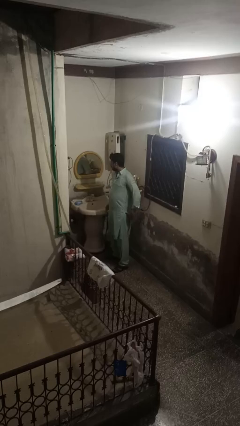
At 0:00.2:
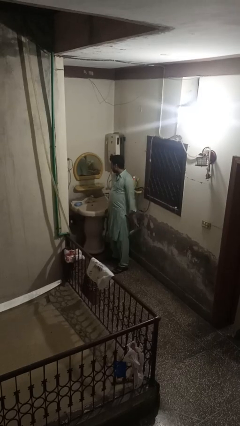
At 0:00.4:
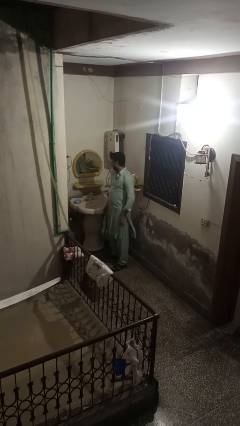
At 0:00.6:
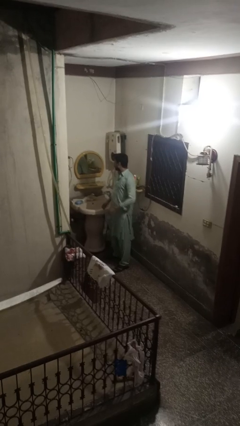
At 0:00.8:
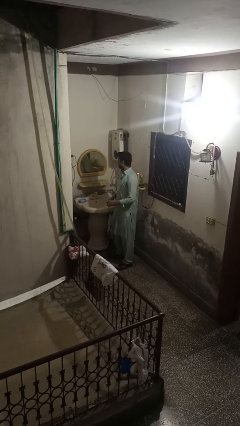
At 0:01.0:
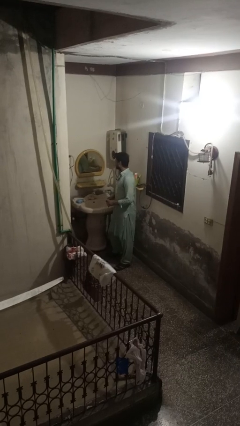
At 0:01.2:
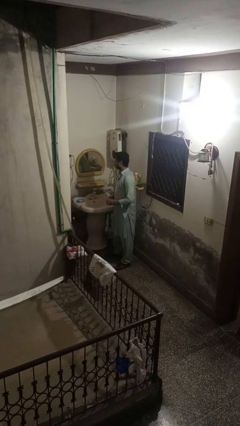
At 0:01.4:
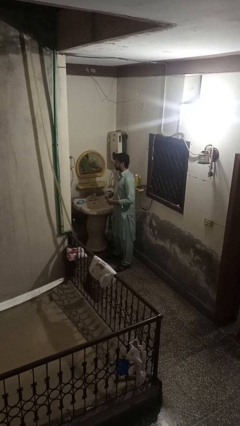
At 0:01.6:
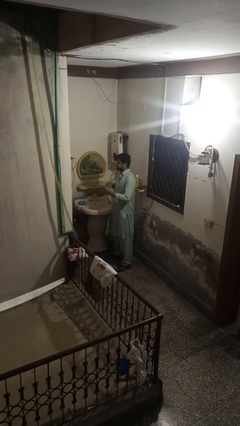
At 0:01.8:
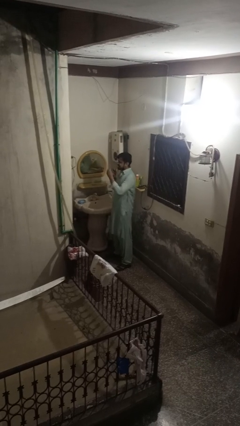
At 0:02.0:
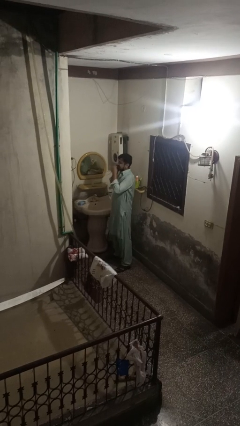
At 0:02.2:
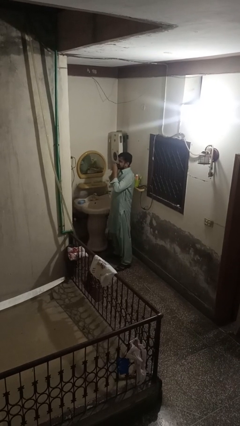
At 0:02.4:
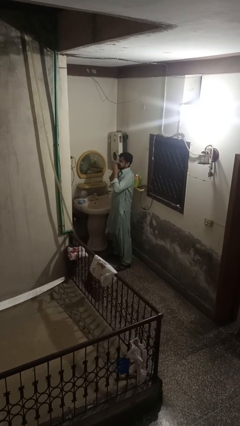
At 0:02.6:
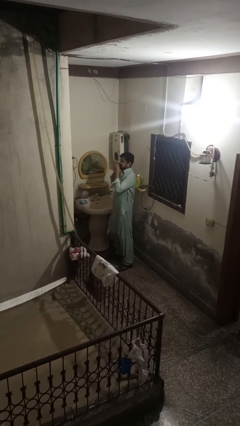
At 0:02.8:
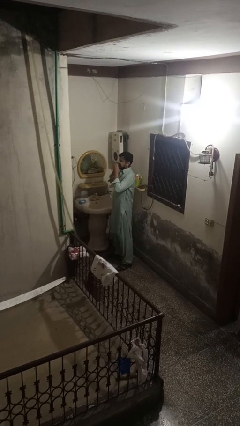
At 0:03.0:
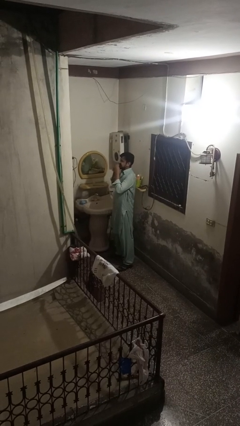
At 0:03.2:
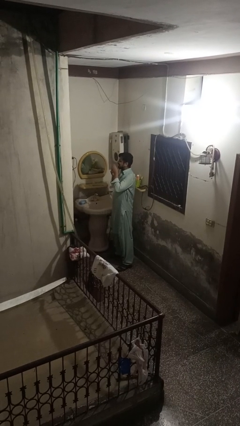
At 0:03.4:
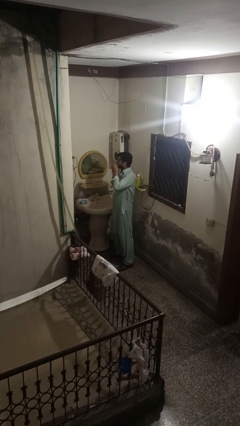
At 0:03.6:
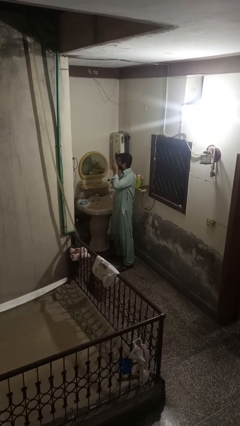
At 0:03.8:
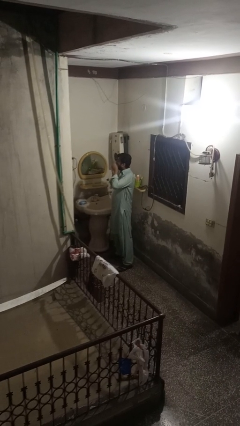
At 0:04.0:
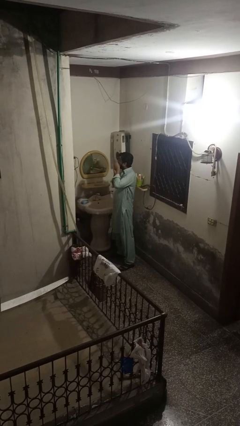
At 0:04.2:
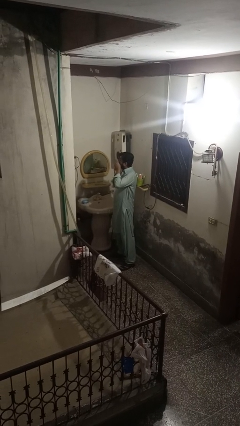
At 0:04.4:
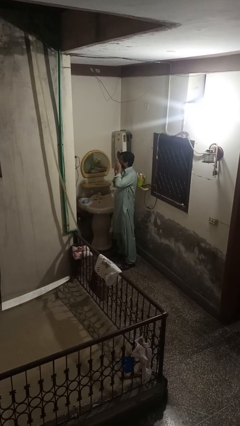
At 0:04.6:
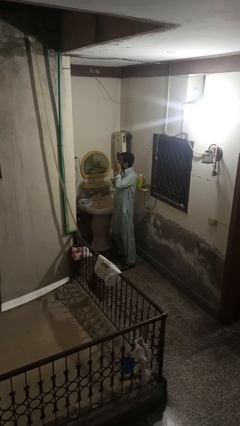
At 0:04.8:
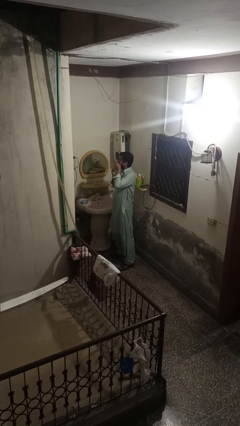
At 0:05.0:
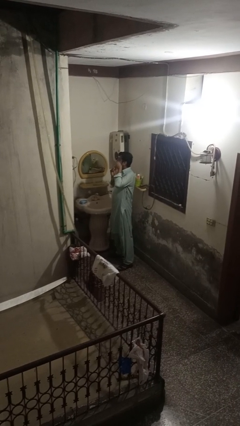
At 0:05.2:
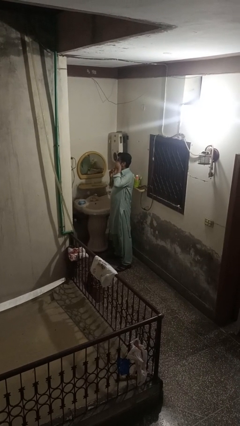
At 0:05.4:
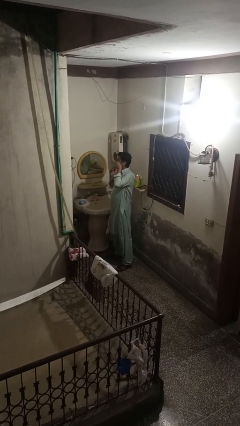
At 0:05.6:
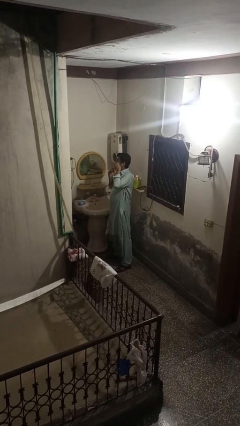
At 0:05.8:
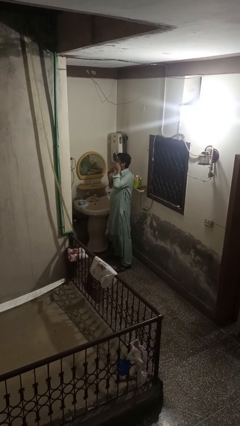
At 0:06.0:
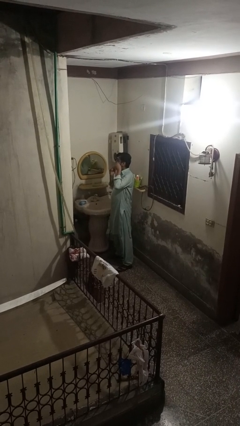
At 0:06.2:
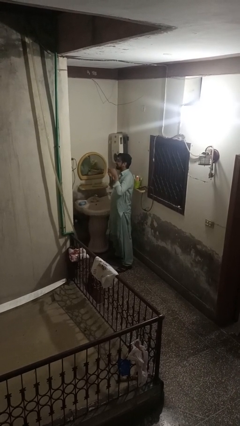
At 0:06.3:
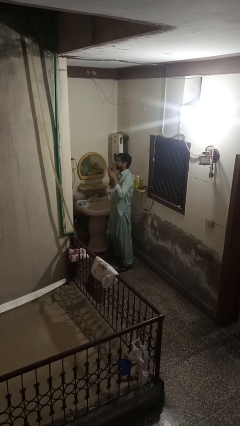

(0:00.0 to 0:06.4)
person flosses

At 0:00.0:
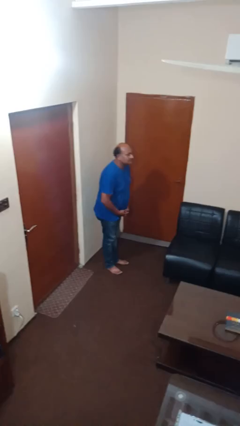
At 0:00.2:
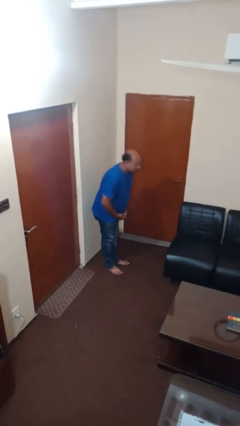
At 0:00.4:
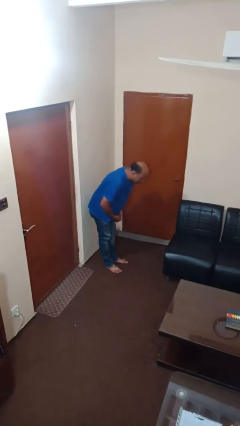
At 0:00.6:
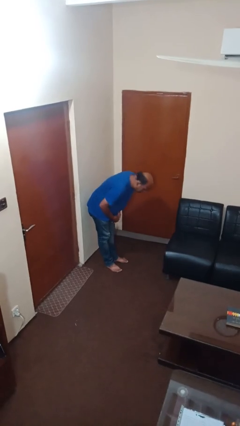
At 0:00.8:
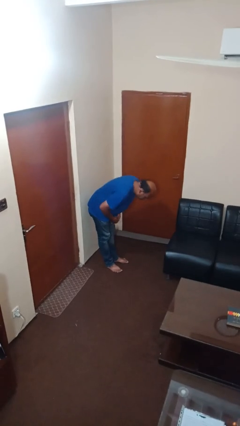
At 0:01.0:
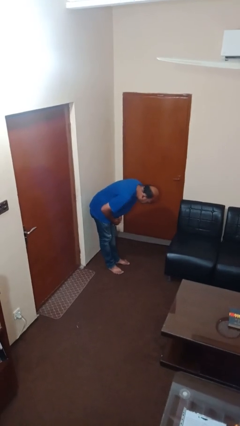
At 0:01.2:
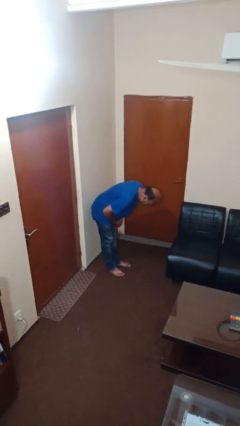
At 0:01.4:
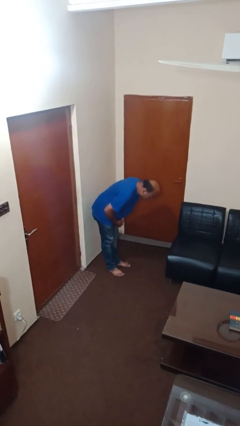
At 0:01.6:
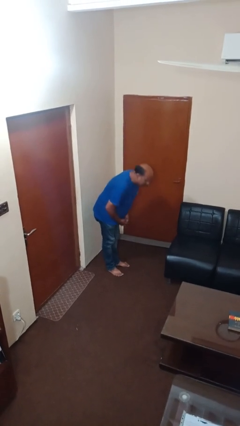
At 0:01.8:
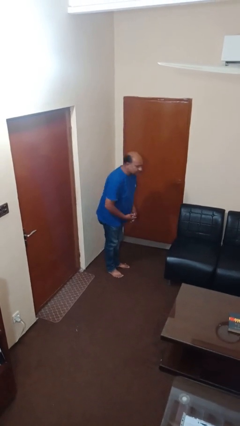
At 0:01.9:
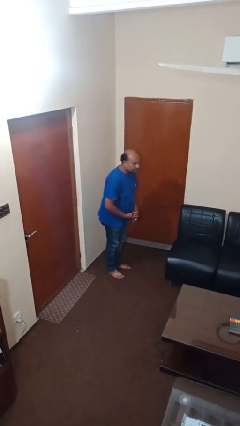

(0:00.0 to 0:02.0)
person bows

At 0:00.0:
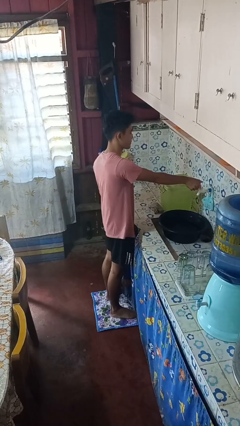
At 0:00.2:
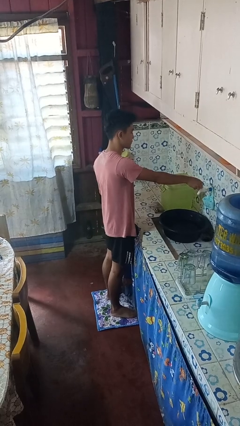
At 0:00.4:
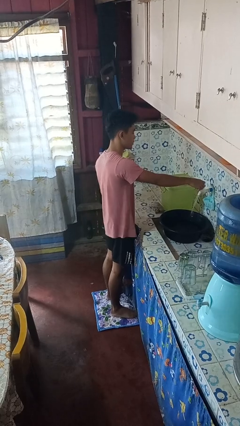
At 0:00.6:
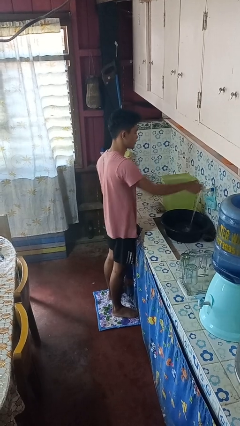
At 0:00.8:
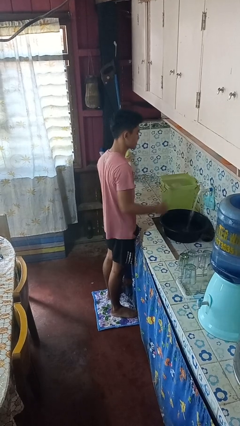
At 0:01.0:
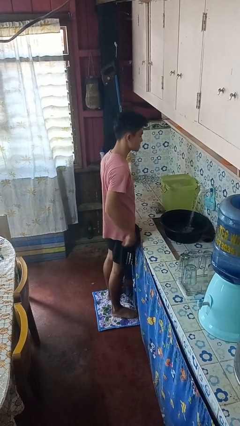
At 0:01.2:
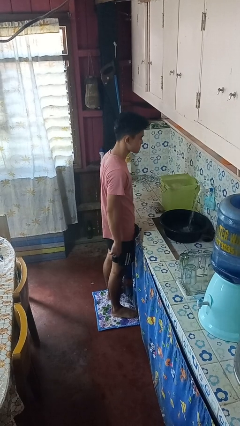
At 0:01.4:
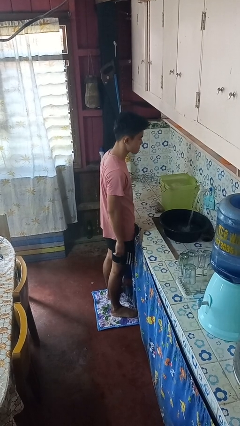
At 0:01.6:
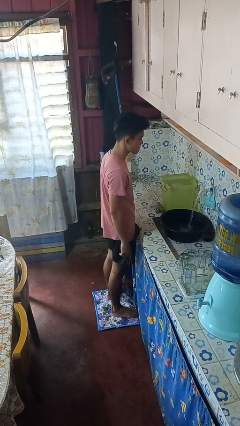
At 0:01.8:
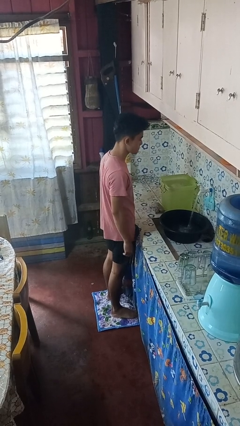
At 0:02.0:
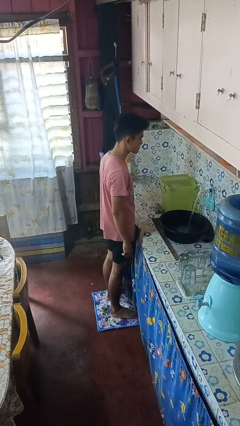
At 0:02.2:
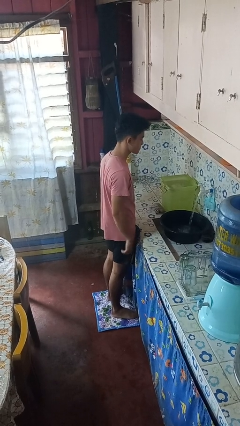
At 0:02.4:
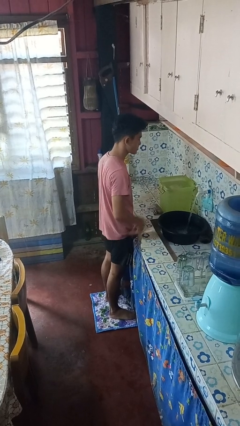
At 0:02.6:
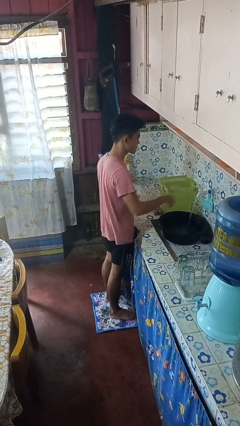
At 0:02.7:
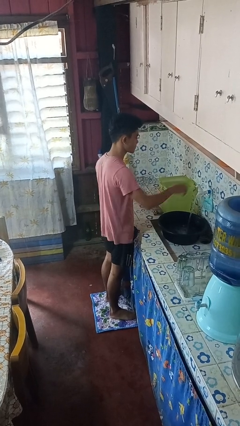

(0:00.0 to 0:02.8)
person turns on faucet

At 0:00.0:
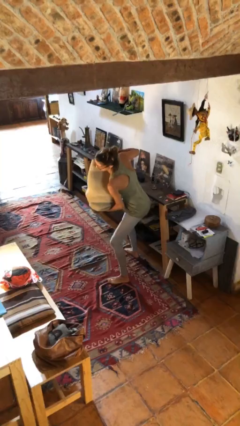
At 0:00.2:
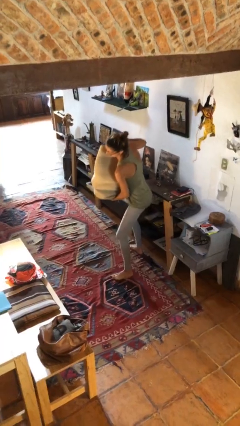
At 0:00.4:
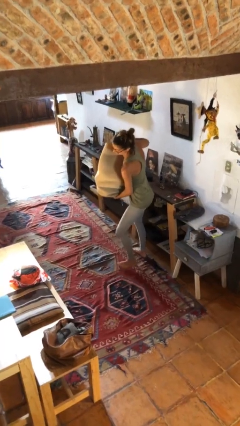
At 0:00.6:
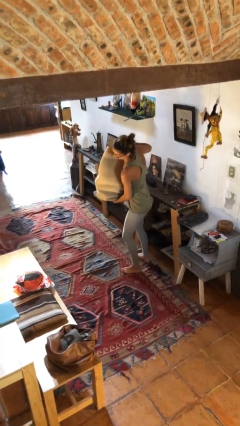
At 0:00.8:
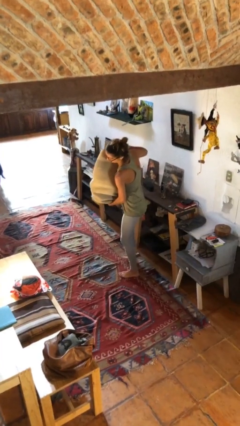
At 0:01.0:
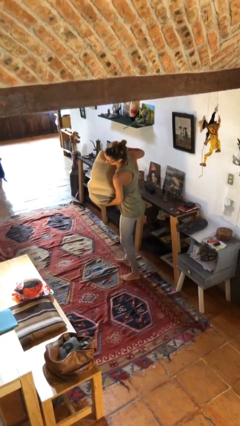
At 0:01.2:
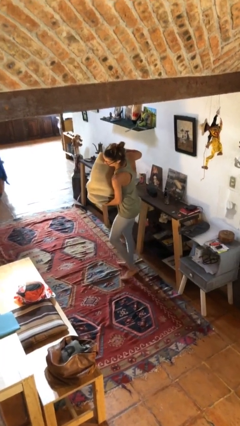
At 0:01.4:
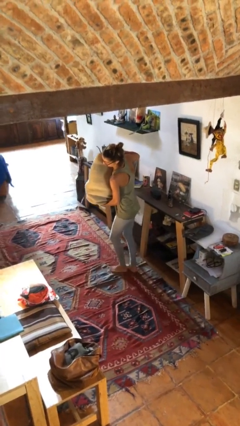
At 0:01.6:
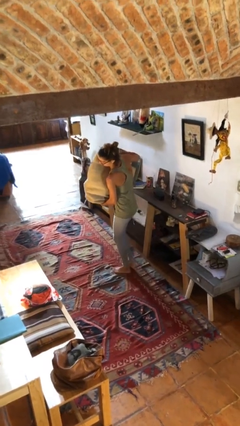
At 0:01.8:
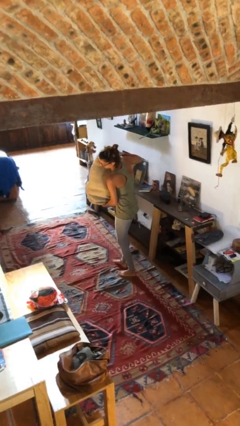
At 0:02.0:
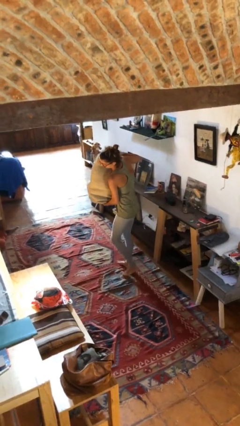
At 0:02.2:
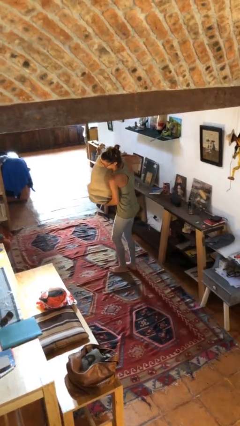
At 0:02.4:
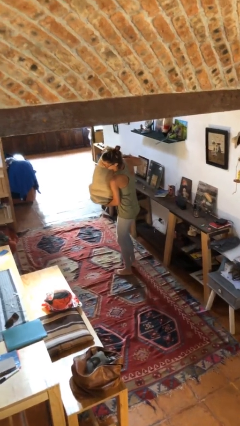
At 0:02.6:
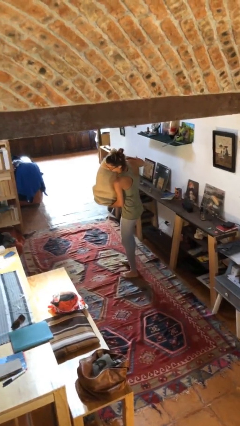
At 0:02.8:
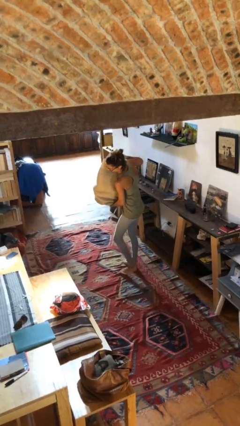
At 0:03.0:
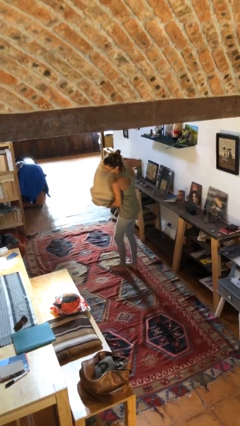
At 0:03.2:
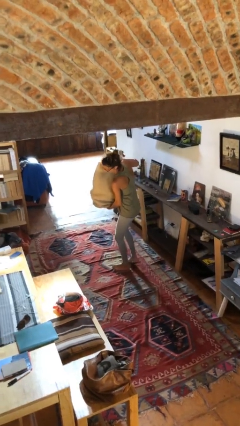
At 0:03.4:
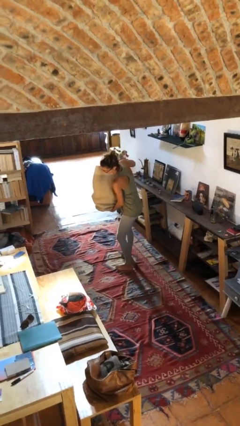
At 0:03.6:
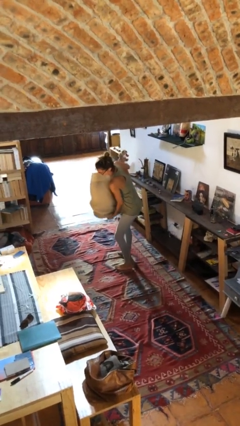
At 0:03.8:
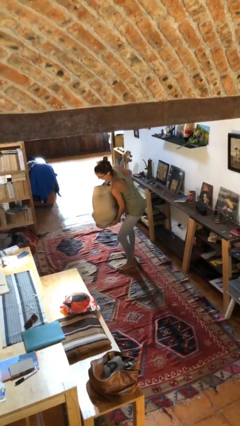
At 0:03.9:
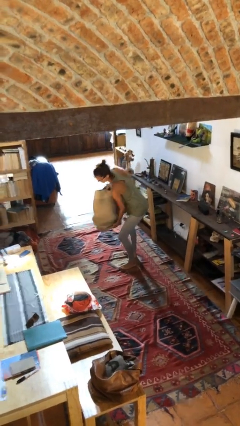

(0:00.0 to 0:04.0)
person carries heavy object

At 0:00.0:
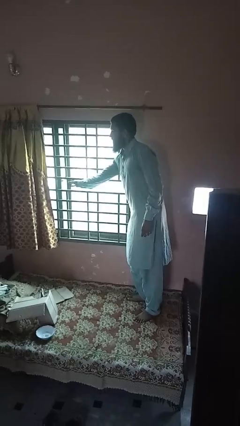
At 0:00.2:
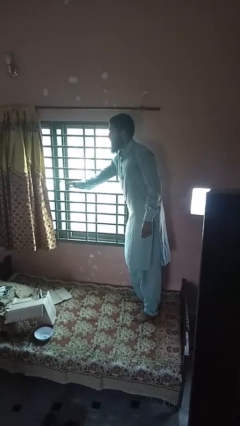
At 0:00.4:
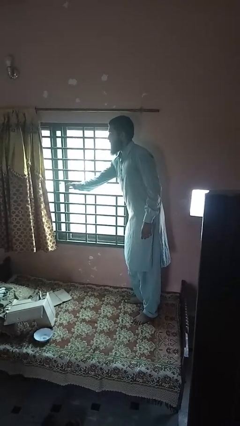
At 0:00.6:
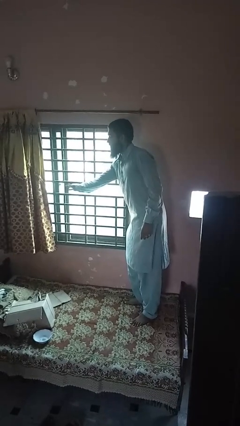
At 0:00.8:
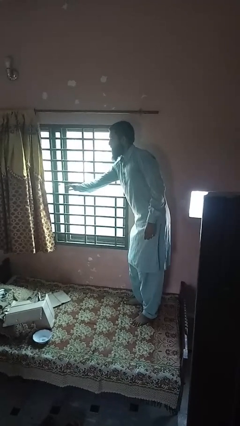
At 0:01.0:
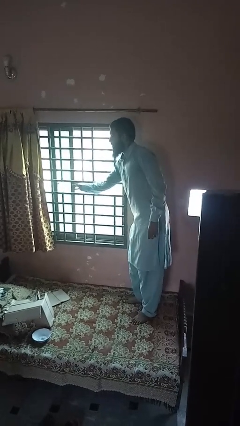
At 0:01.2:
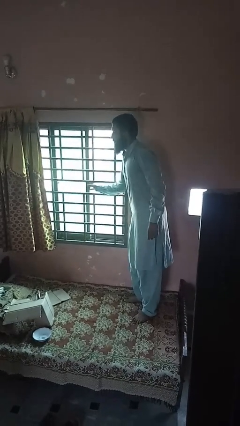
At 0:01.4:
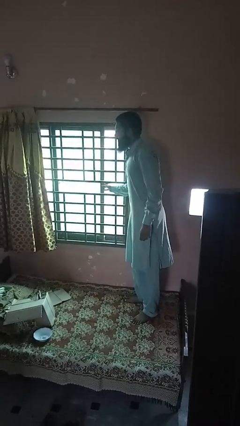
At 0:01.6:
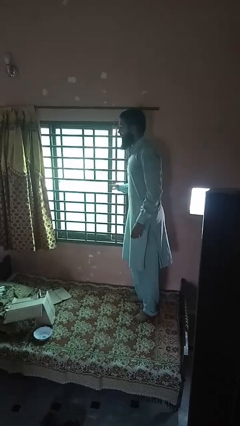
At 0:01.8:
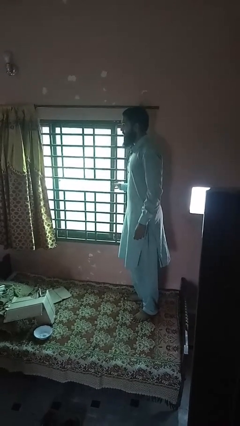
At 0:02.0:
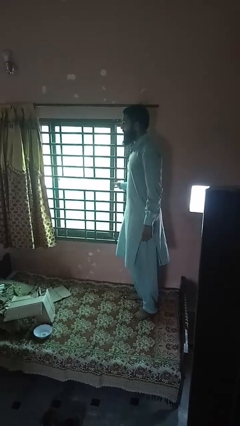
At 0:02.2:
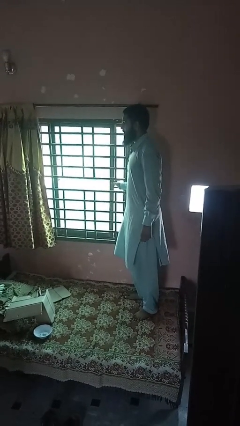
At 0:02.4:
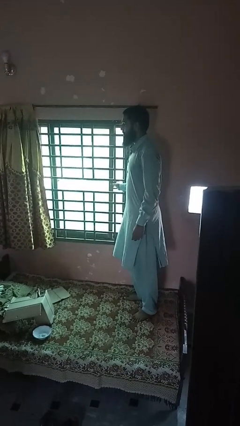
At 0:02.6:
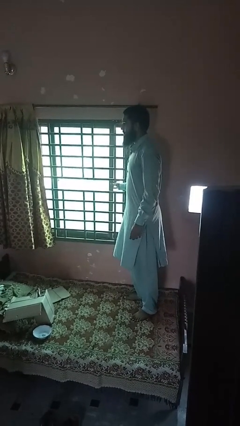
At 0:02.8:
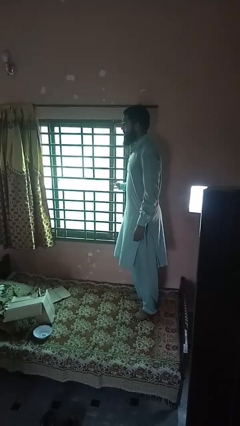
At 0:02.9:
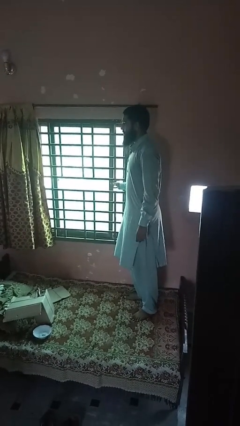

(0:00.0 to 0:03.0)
person closes home window
